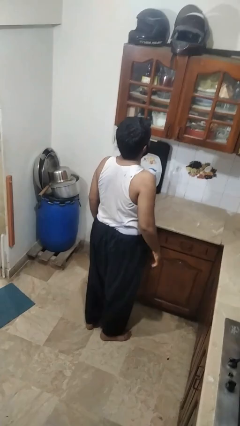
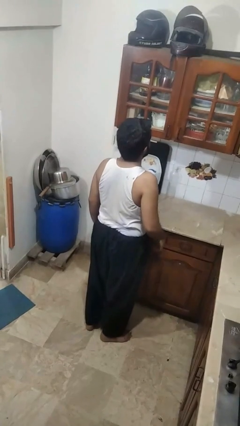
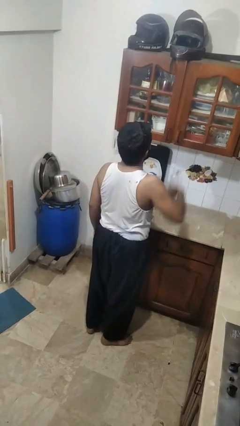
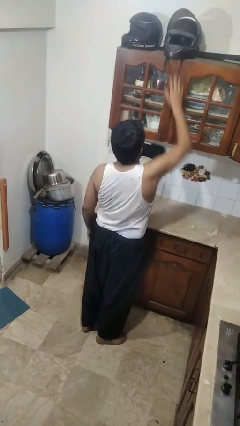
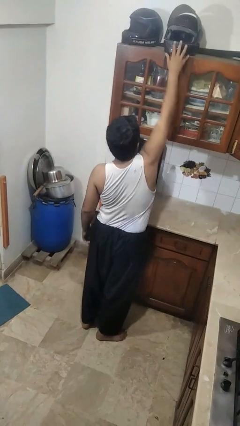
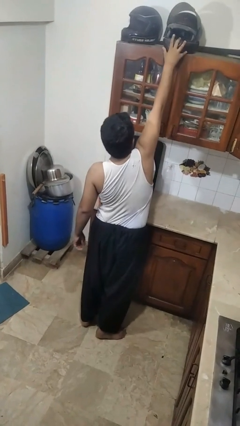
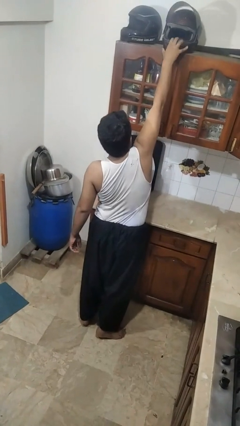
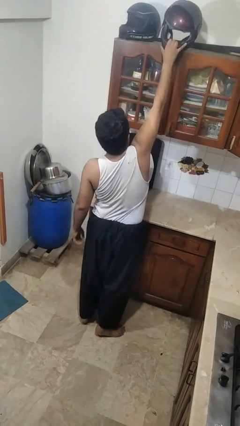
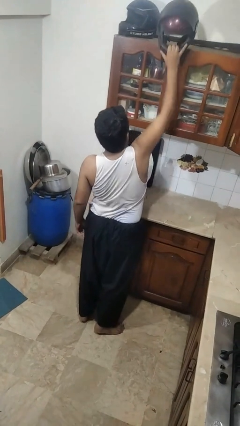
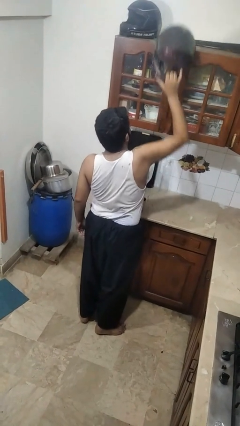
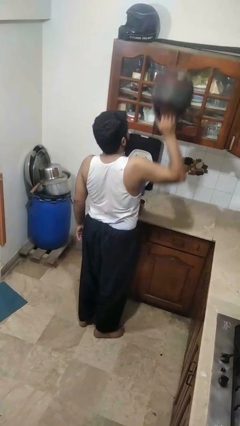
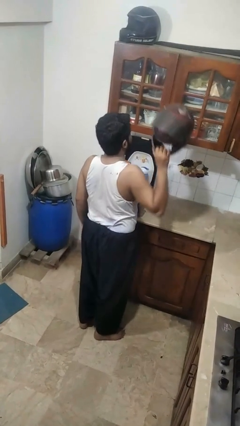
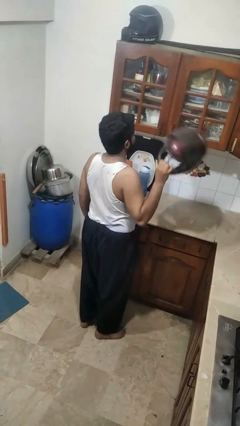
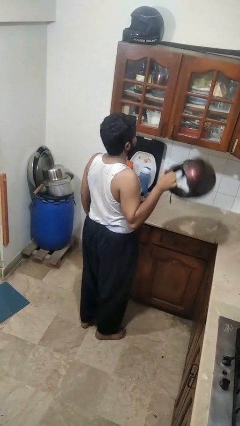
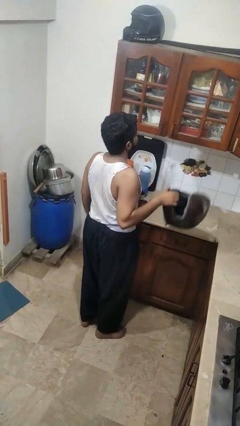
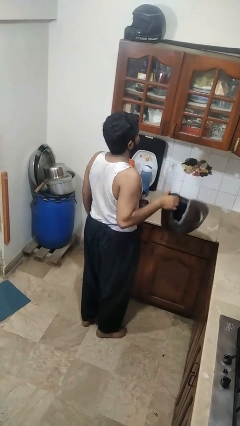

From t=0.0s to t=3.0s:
person picks up object from shelf

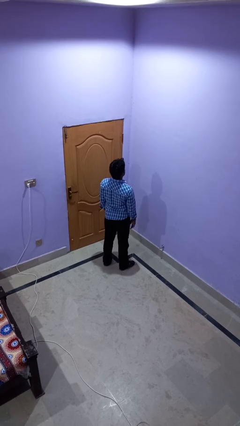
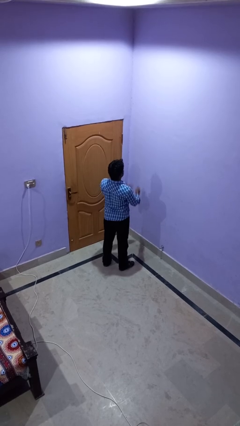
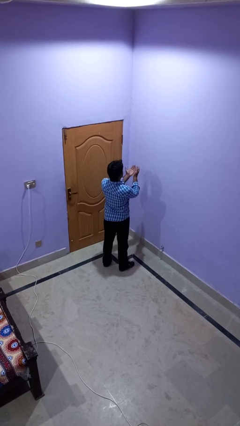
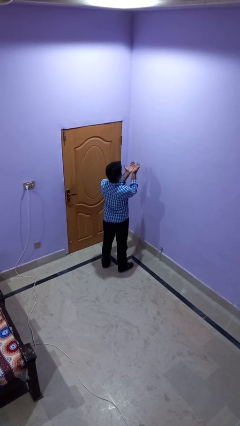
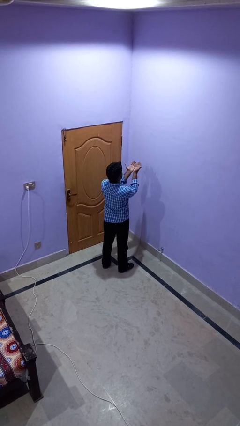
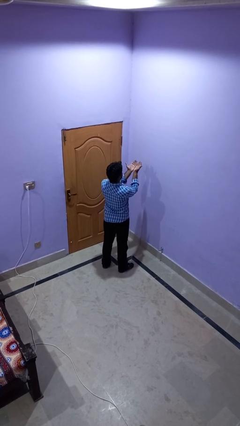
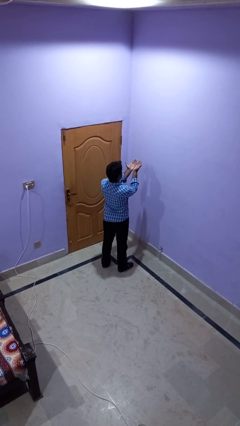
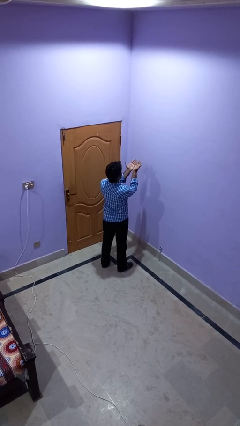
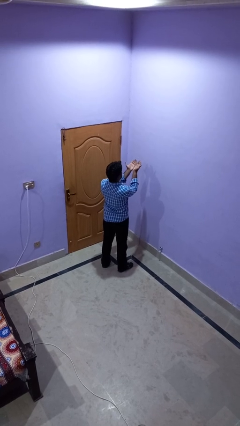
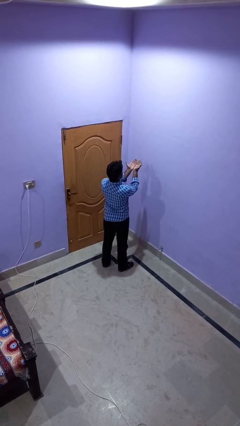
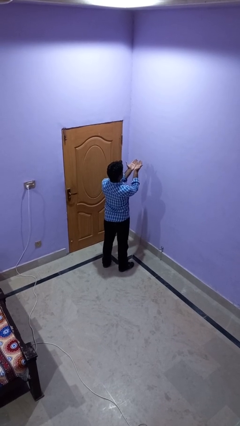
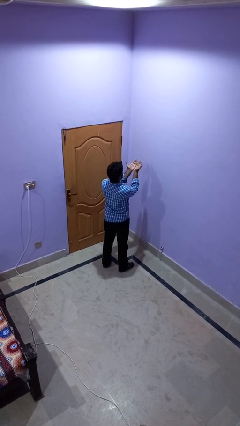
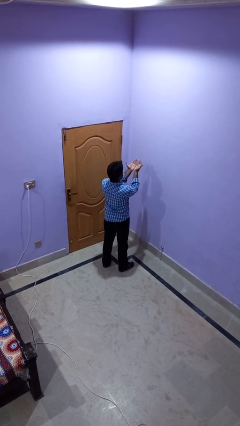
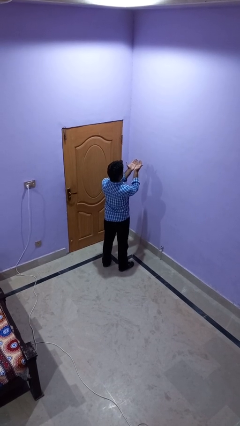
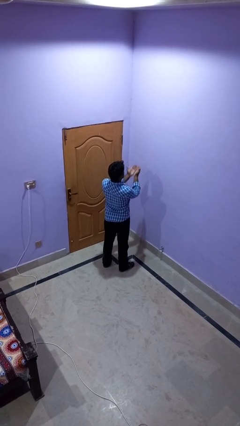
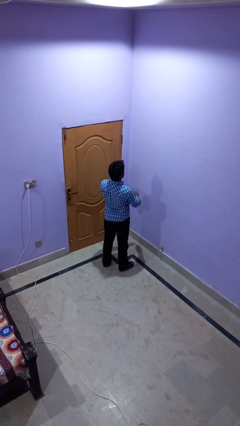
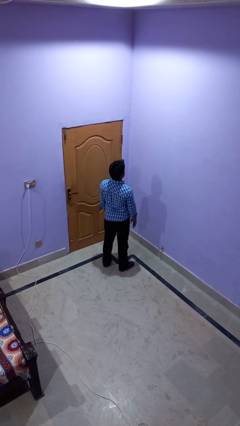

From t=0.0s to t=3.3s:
person prays

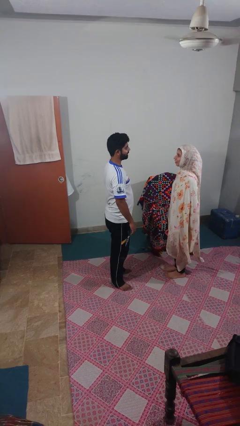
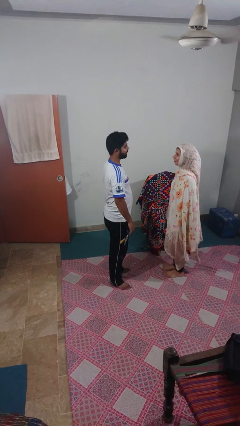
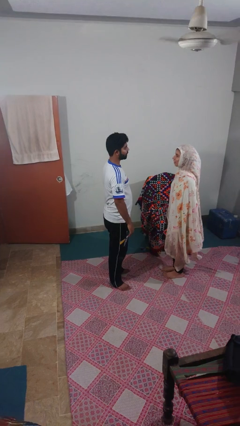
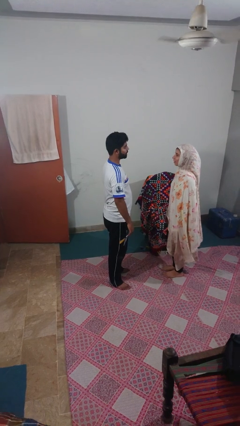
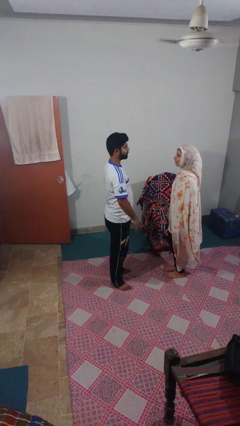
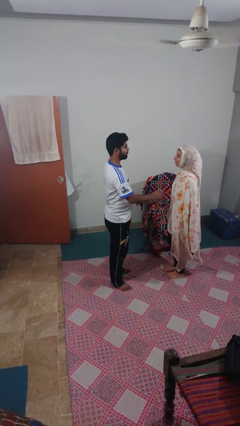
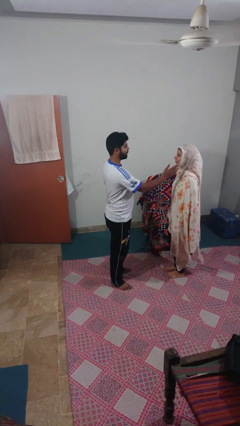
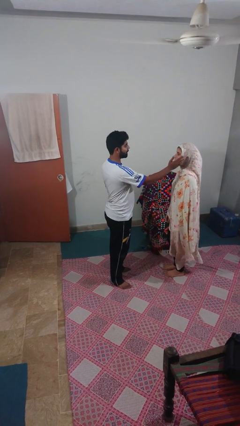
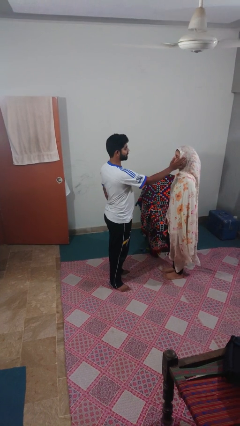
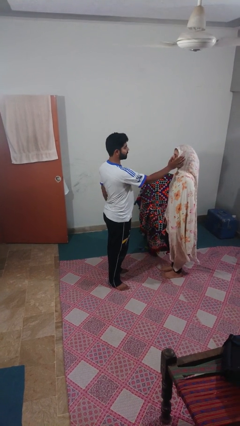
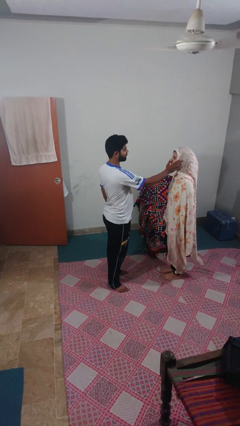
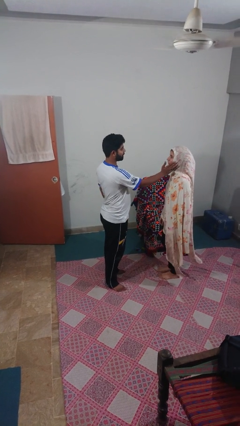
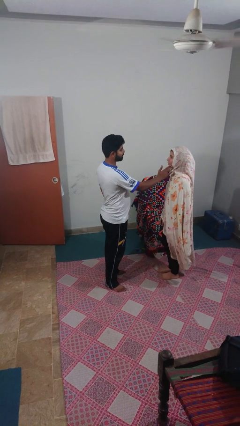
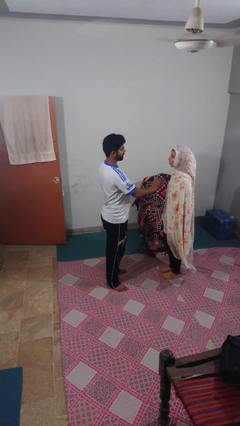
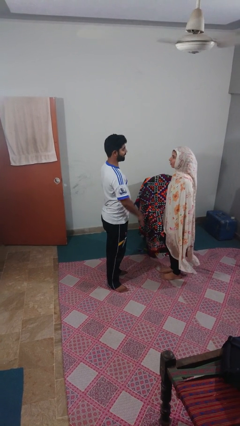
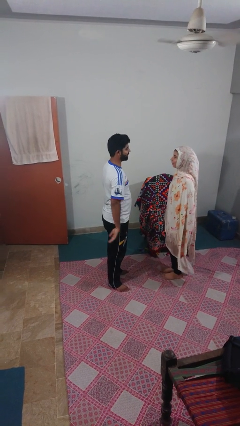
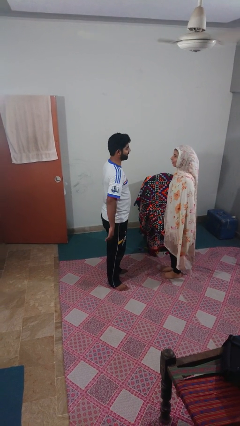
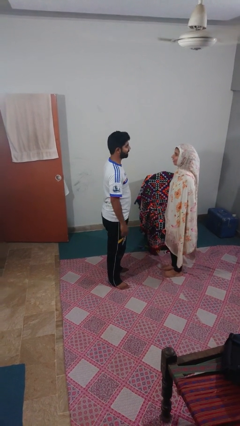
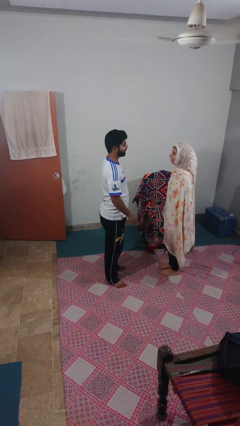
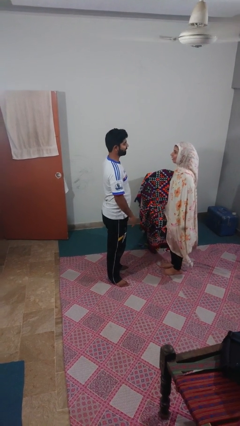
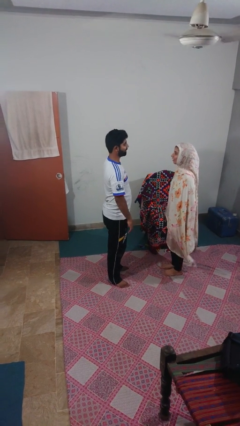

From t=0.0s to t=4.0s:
person touches face of person

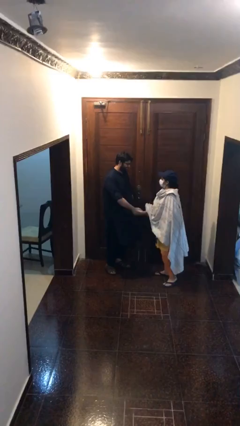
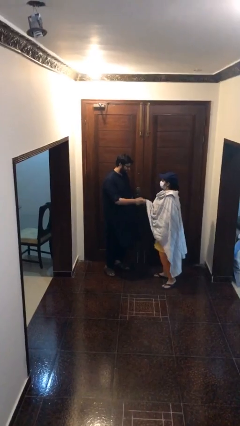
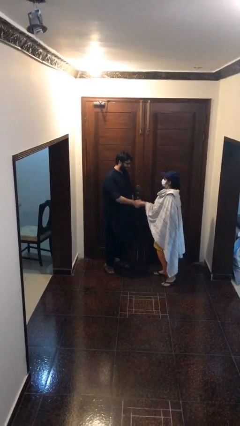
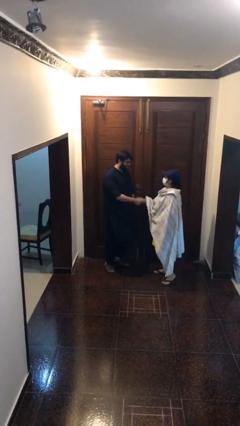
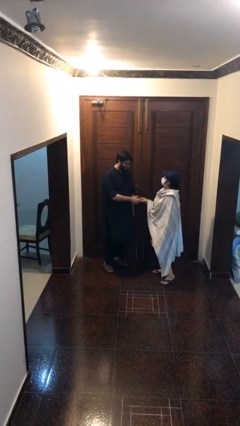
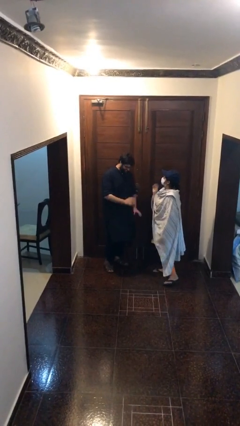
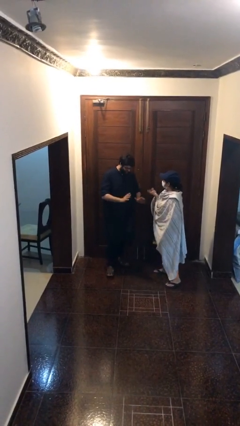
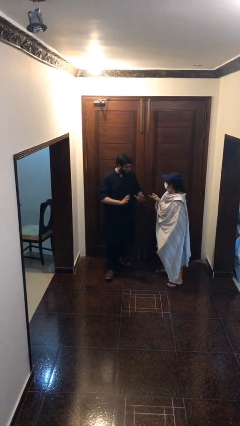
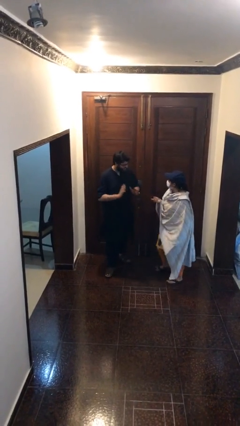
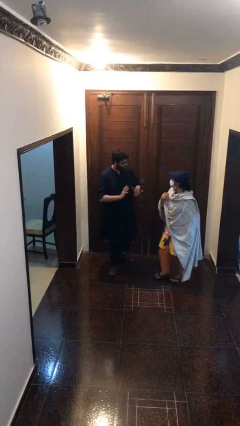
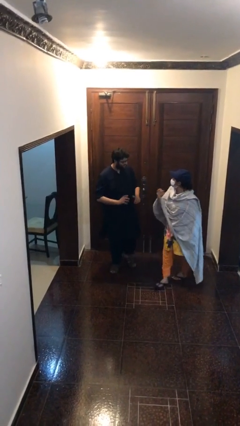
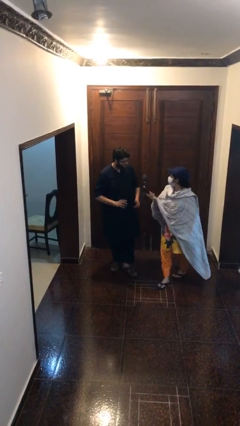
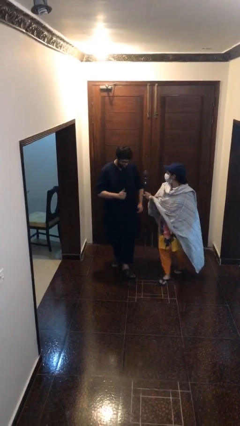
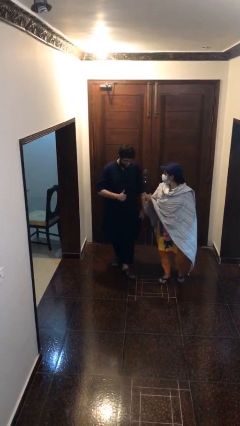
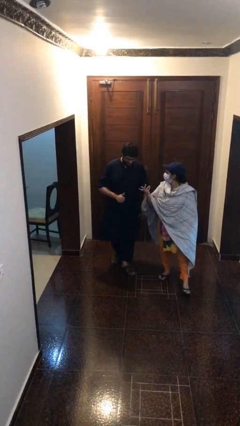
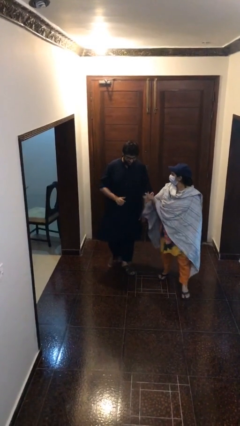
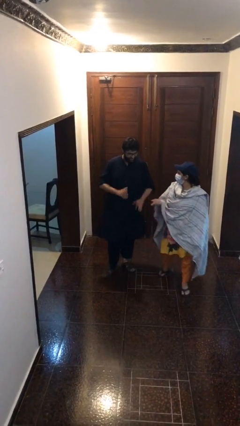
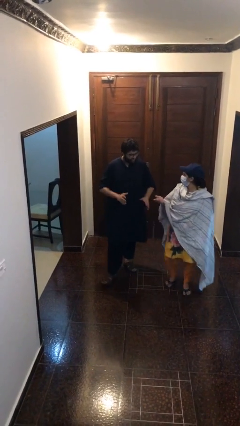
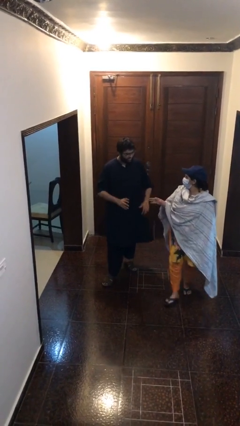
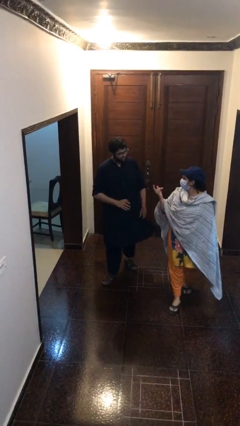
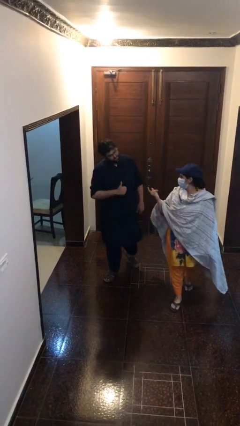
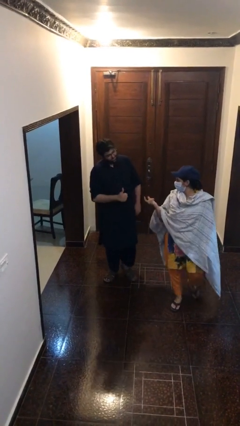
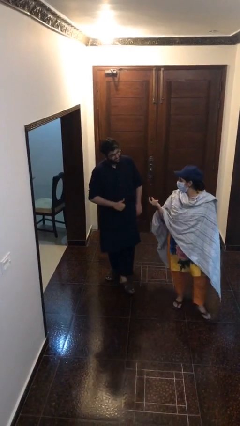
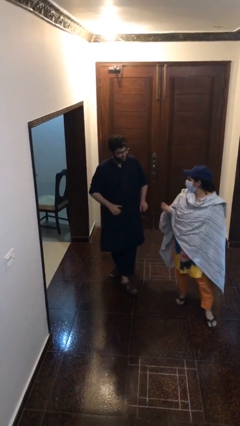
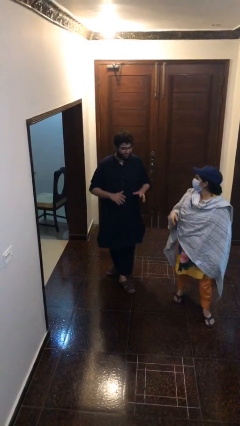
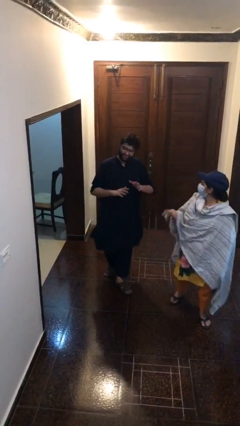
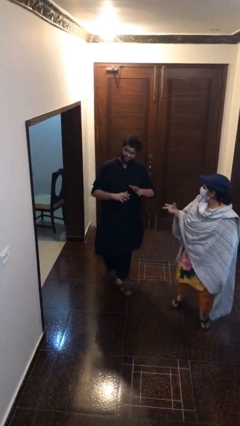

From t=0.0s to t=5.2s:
person talks to person

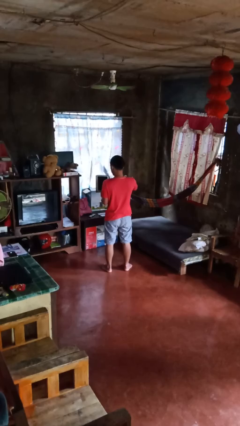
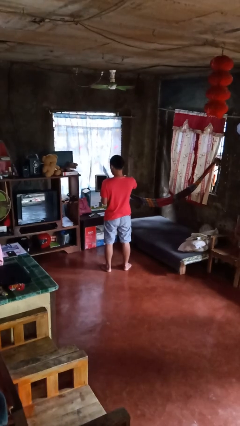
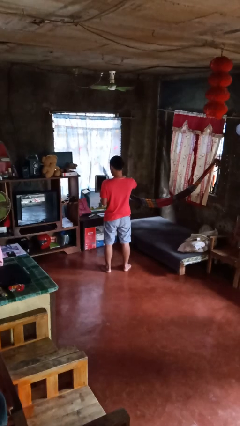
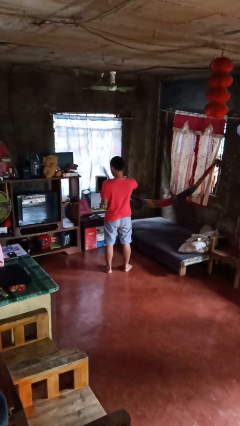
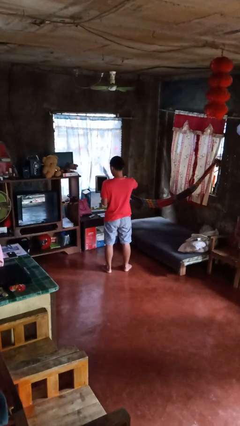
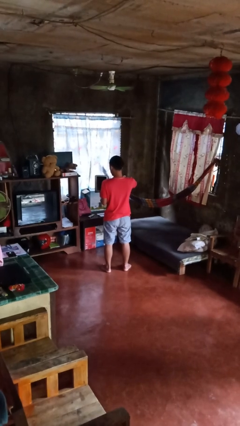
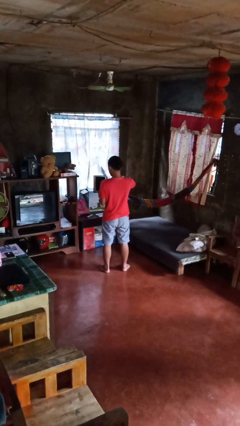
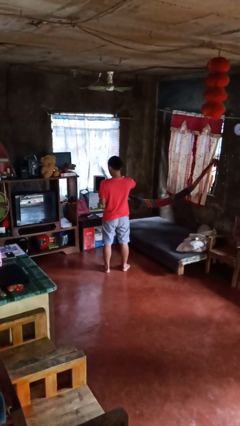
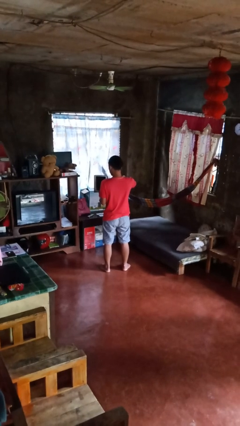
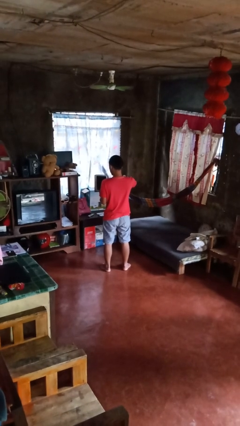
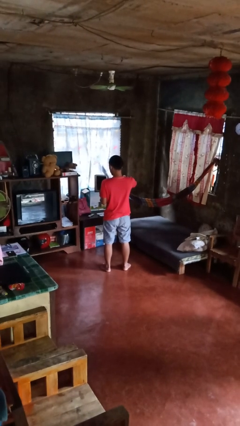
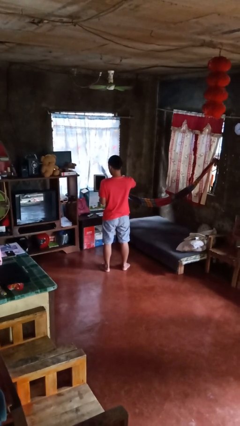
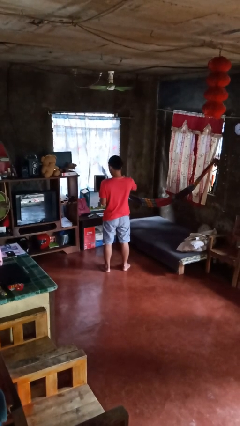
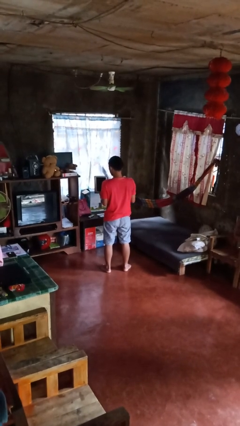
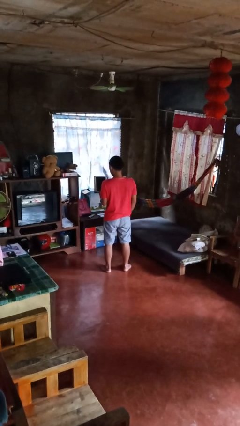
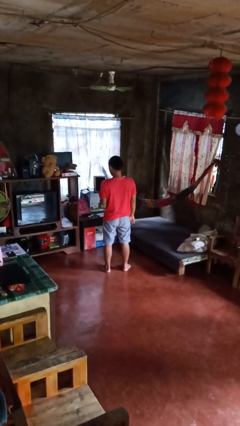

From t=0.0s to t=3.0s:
person interacts with tablet
